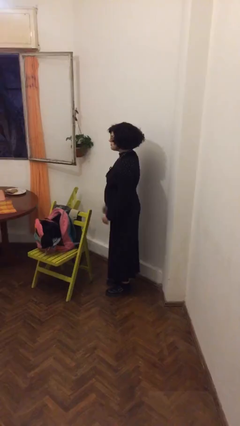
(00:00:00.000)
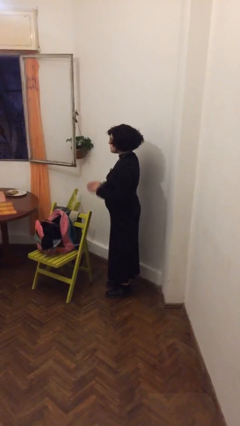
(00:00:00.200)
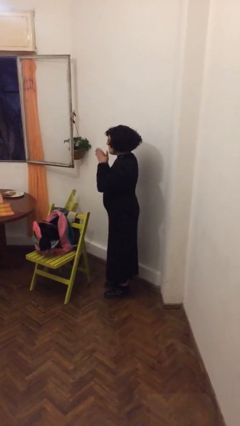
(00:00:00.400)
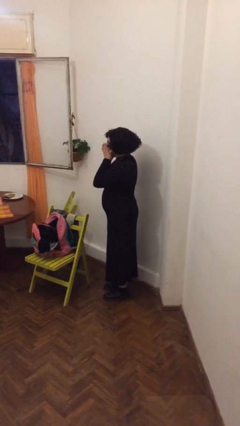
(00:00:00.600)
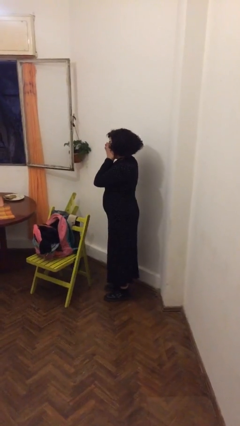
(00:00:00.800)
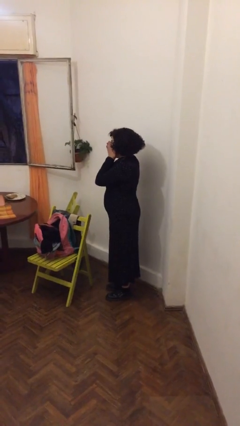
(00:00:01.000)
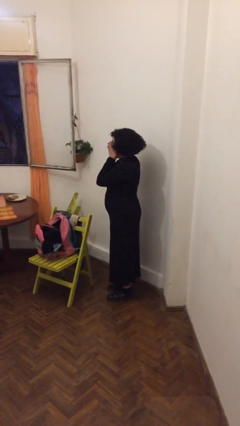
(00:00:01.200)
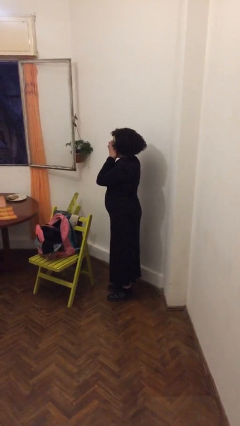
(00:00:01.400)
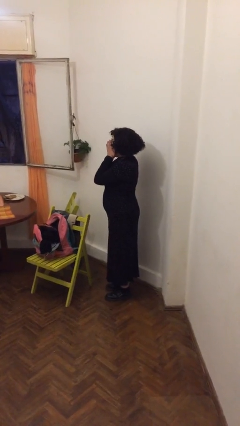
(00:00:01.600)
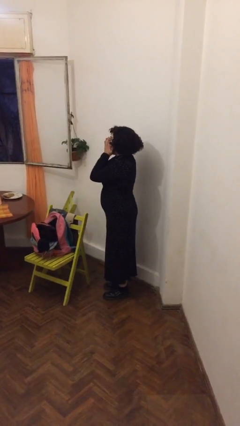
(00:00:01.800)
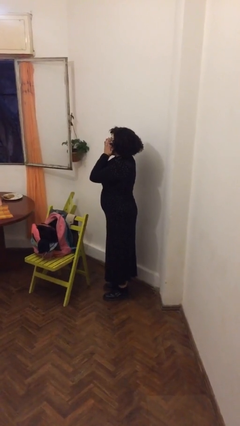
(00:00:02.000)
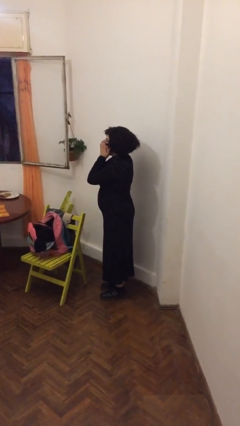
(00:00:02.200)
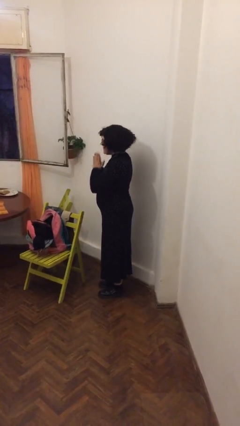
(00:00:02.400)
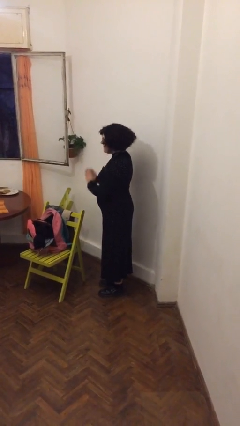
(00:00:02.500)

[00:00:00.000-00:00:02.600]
person yawns

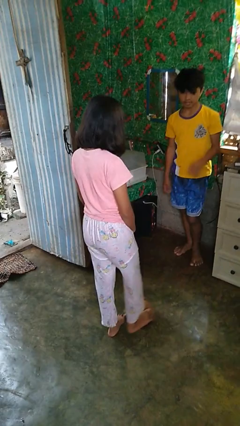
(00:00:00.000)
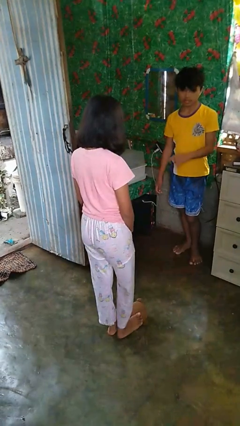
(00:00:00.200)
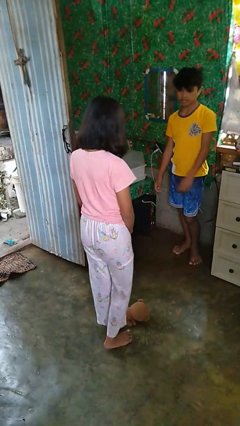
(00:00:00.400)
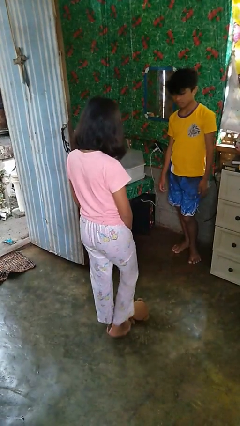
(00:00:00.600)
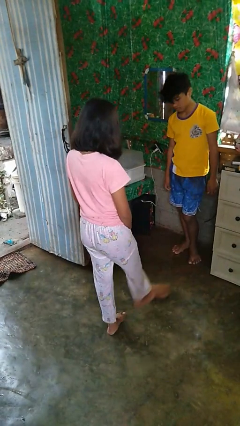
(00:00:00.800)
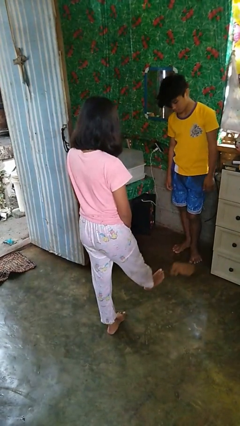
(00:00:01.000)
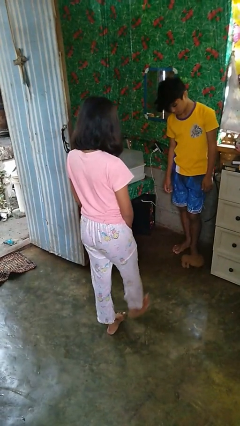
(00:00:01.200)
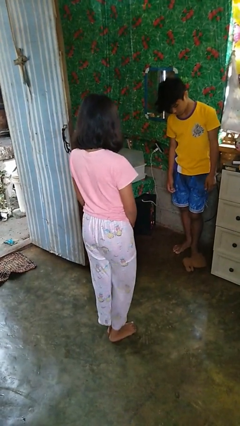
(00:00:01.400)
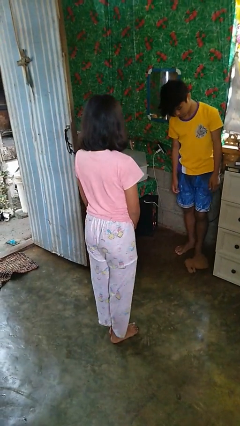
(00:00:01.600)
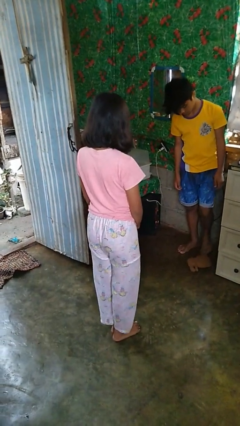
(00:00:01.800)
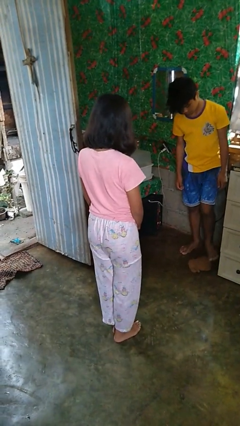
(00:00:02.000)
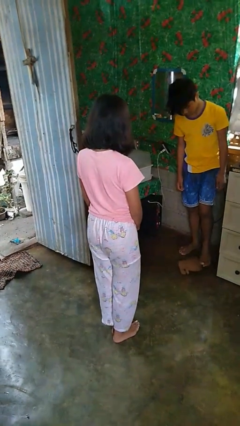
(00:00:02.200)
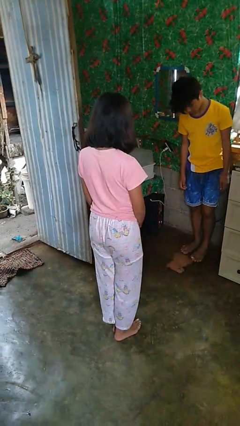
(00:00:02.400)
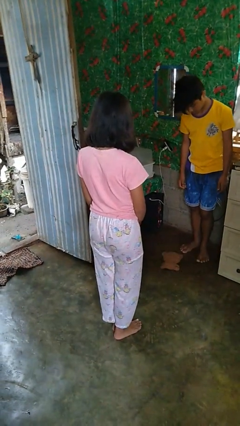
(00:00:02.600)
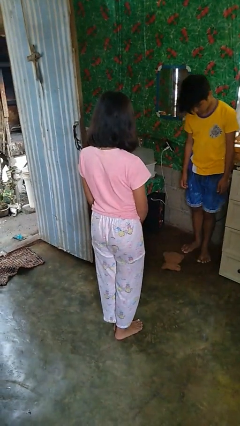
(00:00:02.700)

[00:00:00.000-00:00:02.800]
person kicks object to person

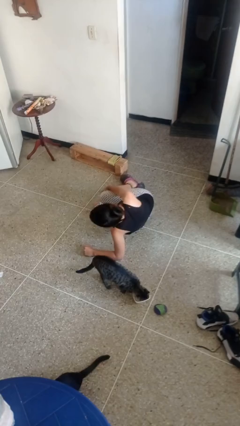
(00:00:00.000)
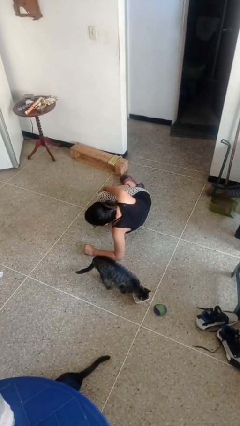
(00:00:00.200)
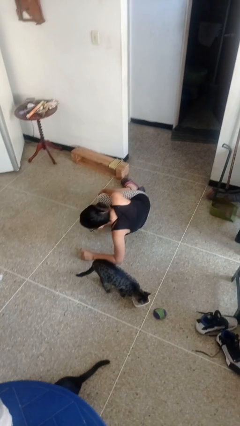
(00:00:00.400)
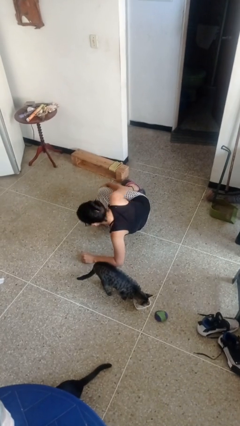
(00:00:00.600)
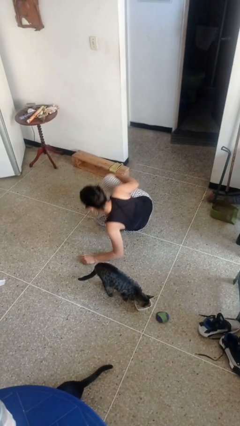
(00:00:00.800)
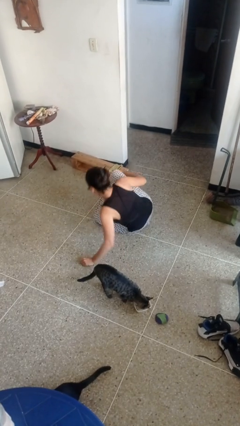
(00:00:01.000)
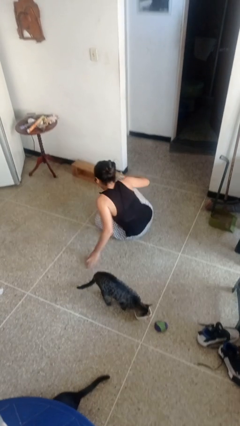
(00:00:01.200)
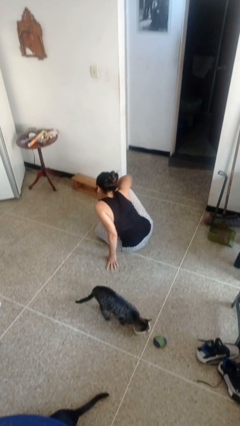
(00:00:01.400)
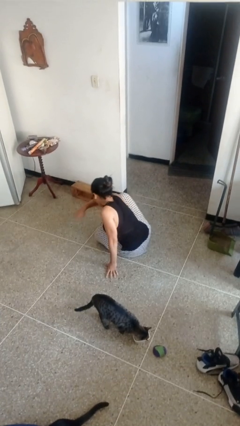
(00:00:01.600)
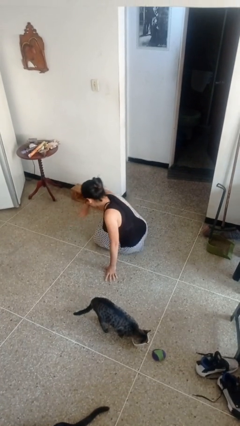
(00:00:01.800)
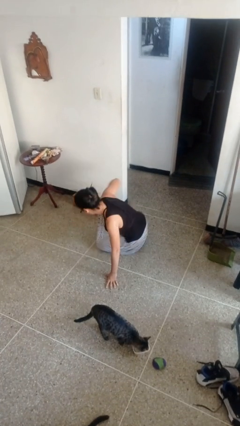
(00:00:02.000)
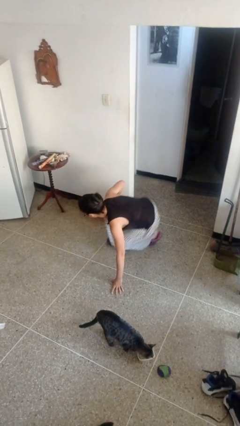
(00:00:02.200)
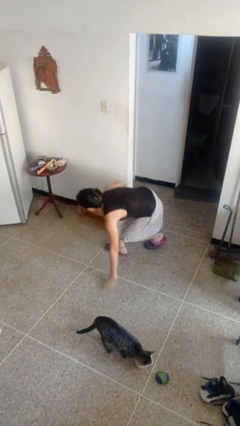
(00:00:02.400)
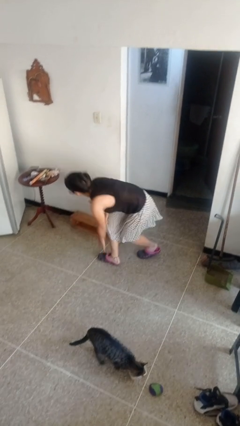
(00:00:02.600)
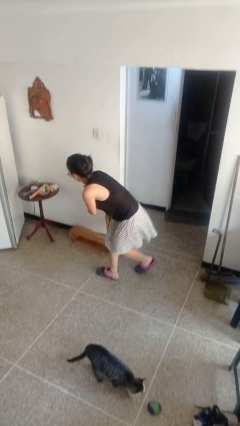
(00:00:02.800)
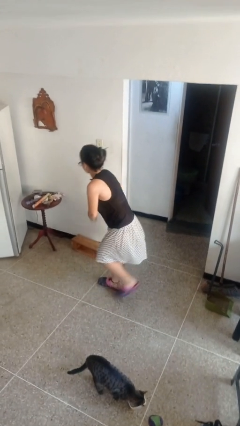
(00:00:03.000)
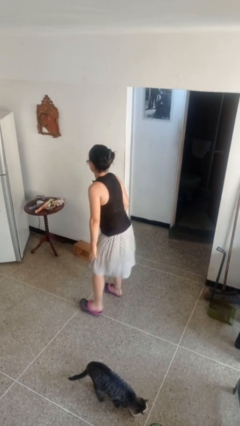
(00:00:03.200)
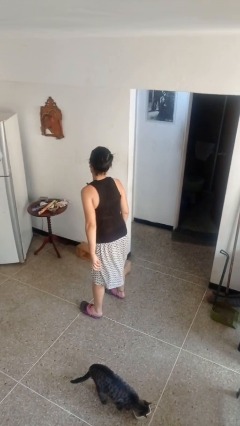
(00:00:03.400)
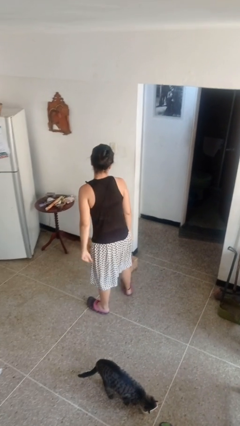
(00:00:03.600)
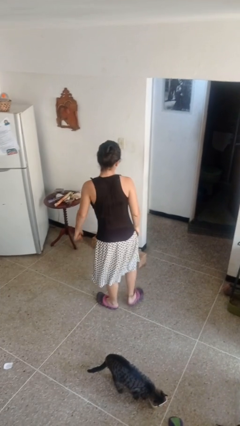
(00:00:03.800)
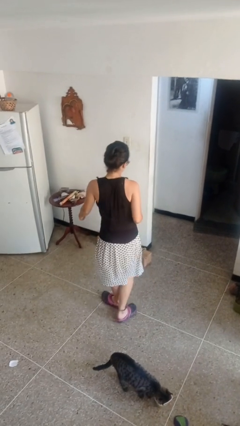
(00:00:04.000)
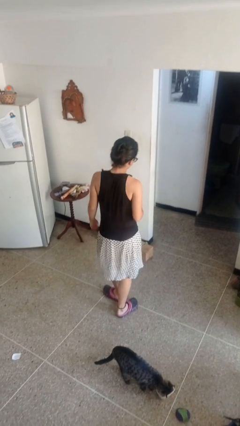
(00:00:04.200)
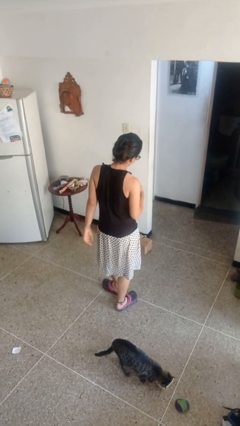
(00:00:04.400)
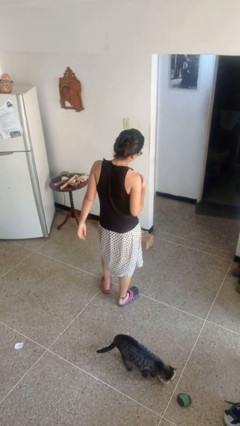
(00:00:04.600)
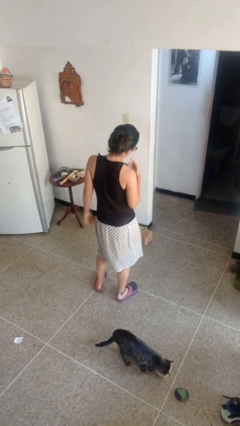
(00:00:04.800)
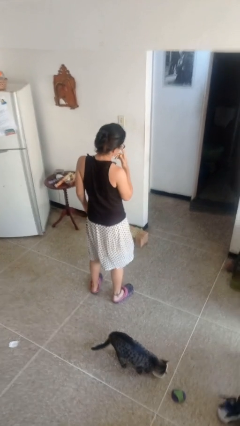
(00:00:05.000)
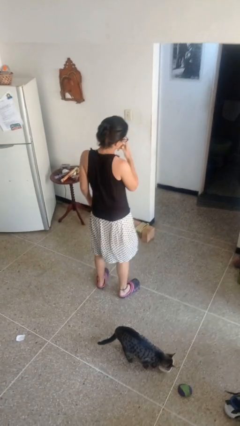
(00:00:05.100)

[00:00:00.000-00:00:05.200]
person stands up from floor

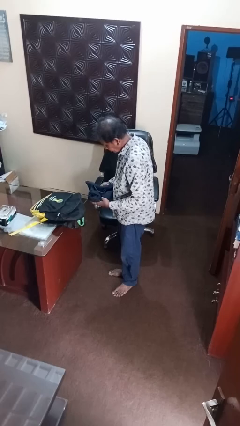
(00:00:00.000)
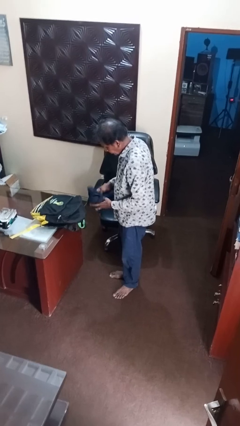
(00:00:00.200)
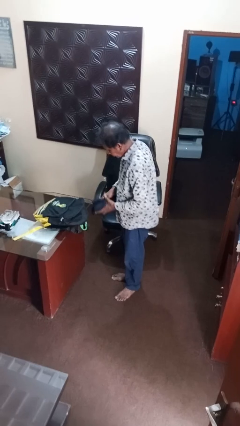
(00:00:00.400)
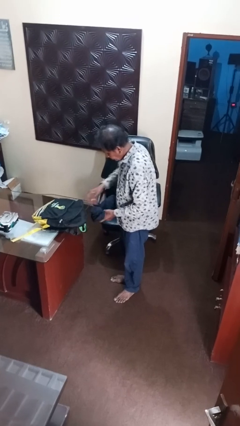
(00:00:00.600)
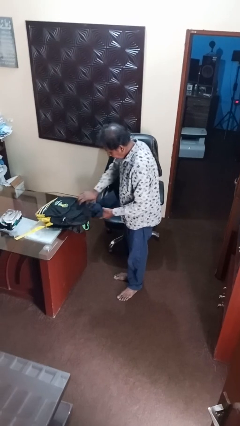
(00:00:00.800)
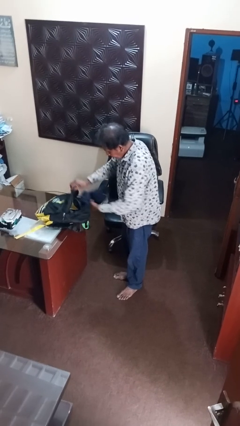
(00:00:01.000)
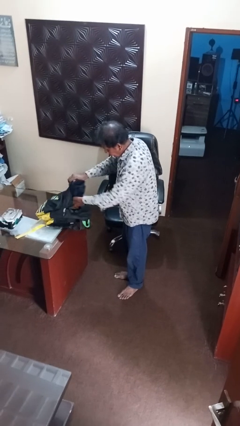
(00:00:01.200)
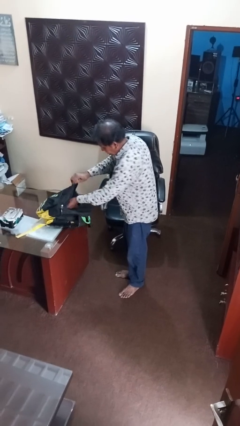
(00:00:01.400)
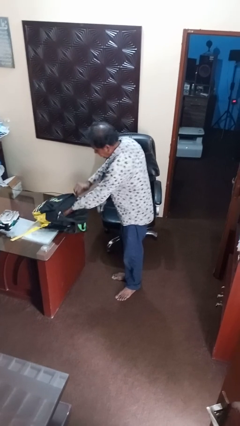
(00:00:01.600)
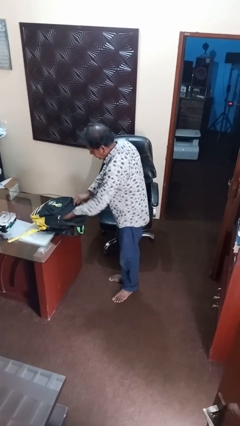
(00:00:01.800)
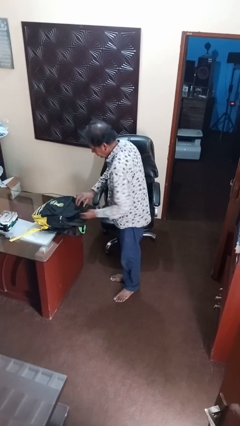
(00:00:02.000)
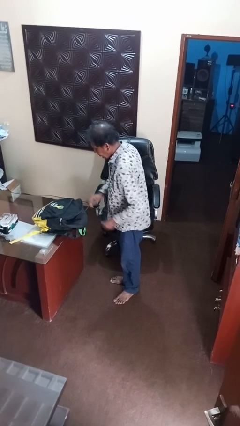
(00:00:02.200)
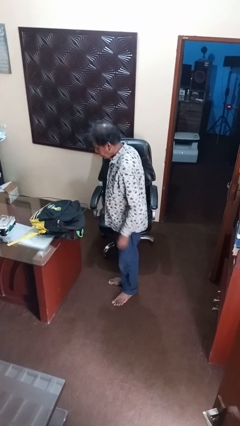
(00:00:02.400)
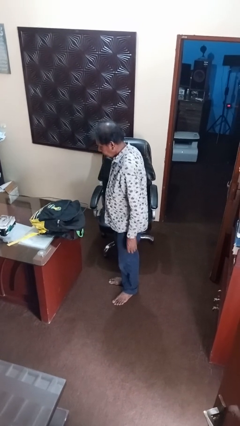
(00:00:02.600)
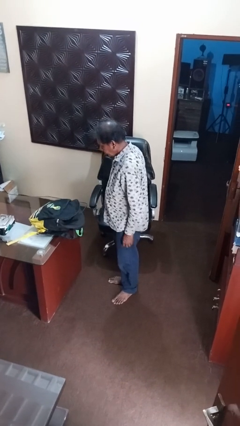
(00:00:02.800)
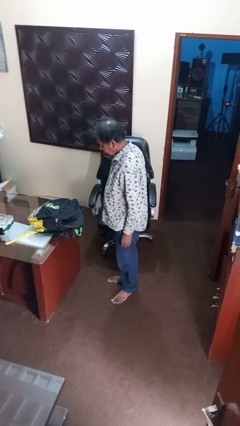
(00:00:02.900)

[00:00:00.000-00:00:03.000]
person puts object into backpack

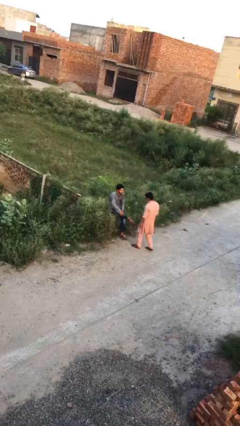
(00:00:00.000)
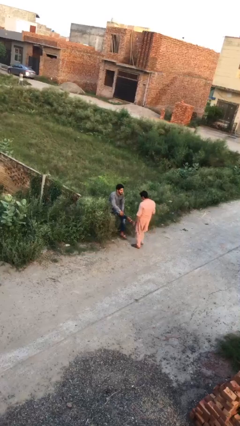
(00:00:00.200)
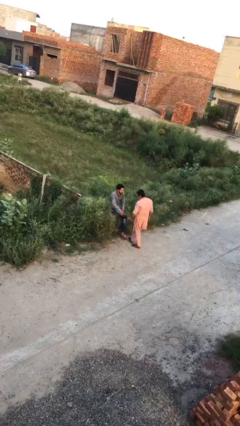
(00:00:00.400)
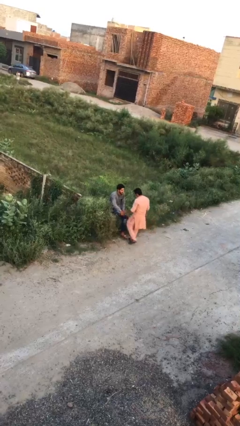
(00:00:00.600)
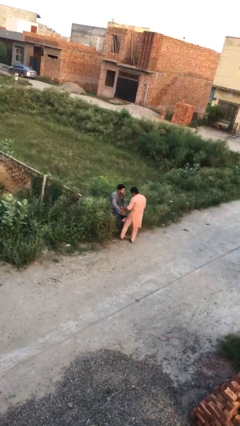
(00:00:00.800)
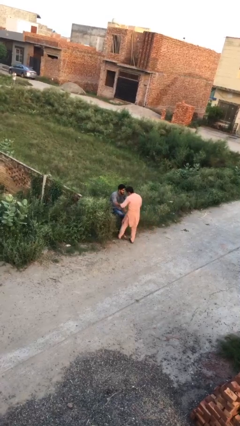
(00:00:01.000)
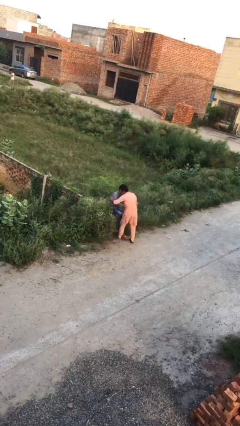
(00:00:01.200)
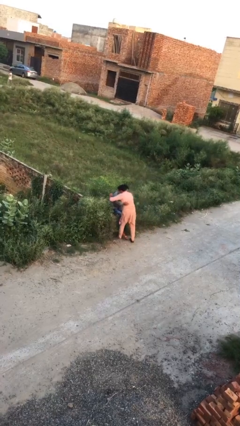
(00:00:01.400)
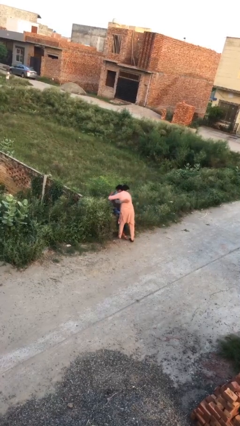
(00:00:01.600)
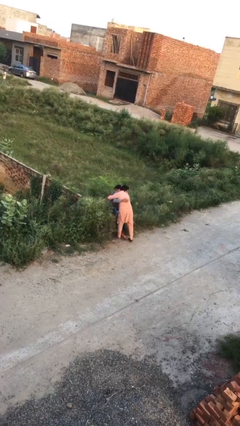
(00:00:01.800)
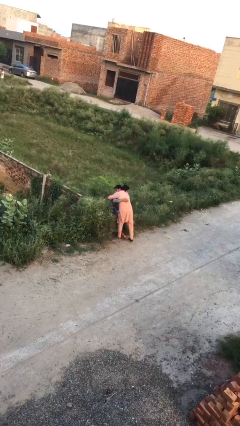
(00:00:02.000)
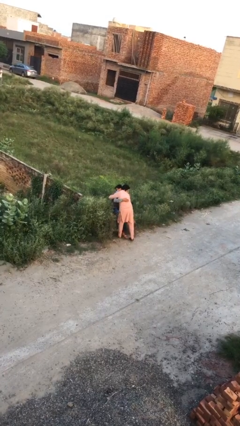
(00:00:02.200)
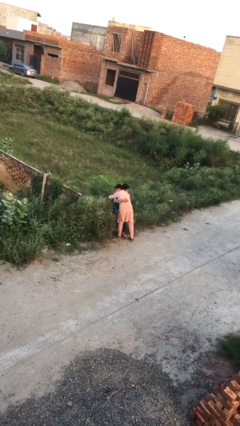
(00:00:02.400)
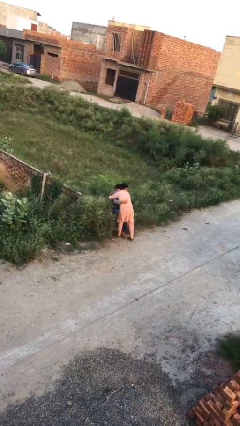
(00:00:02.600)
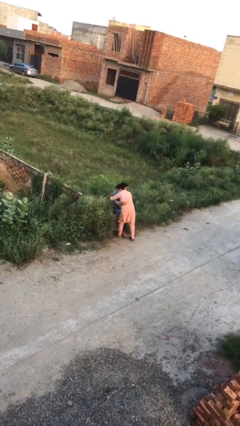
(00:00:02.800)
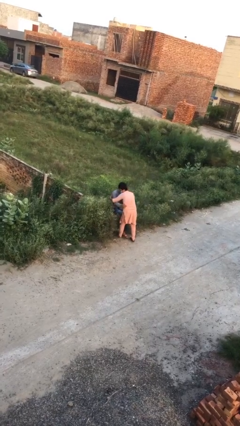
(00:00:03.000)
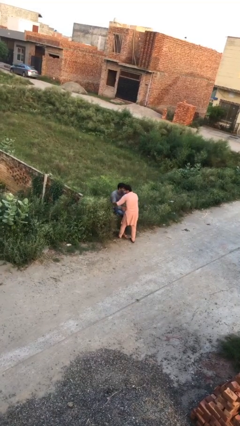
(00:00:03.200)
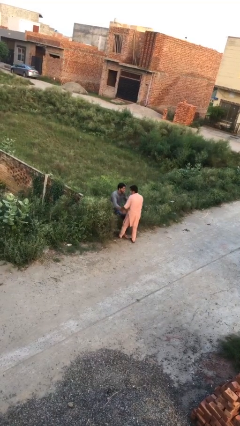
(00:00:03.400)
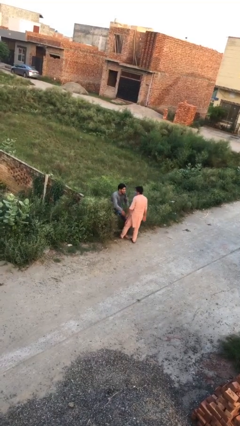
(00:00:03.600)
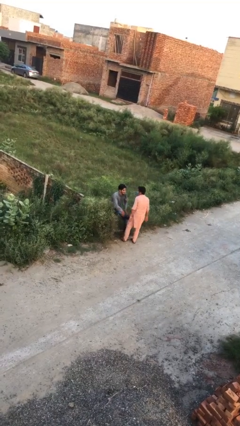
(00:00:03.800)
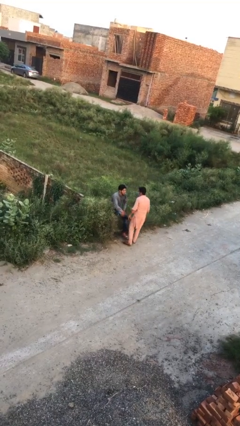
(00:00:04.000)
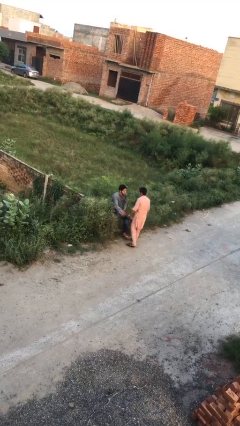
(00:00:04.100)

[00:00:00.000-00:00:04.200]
person embraces person
